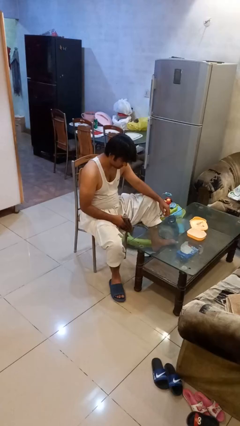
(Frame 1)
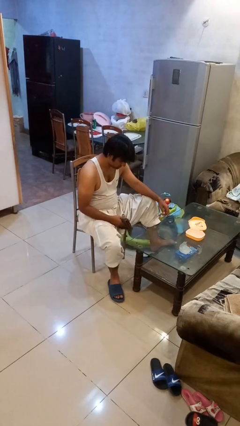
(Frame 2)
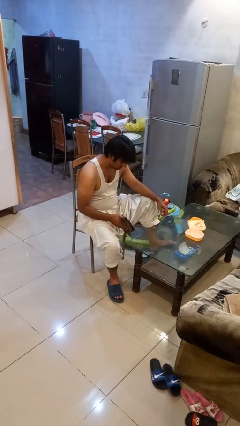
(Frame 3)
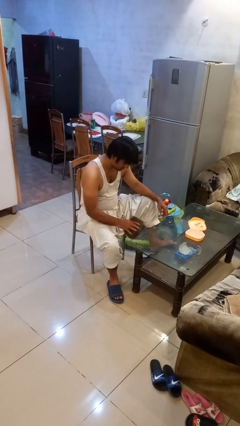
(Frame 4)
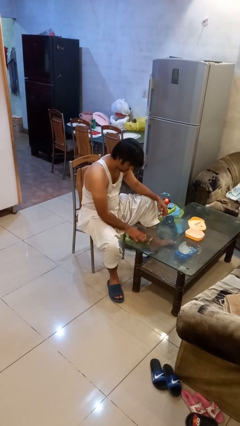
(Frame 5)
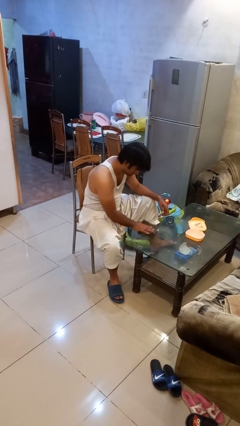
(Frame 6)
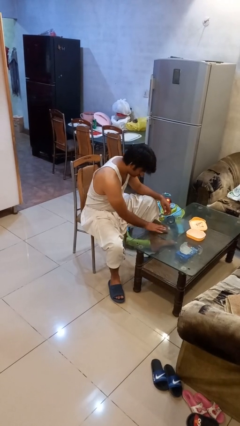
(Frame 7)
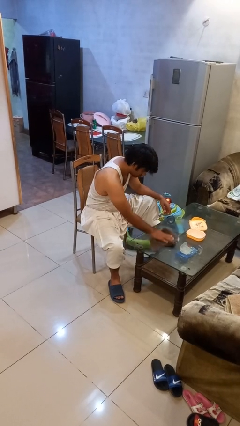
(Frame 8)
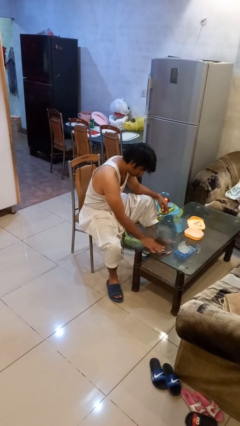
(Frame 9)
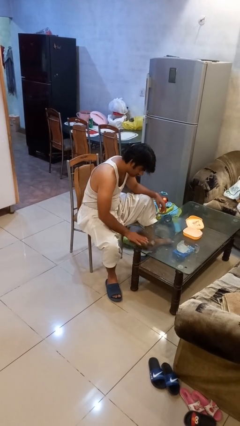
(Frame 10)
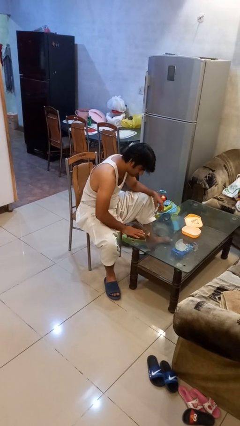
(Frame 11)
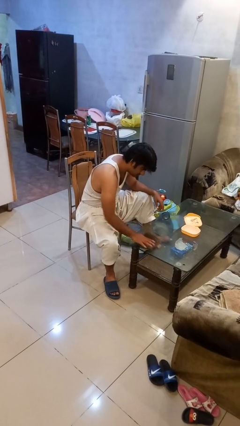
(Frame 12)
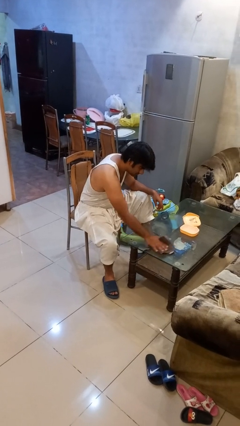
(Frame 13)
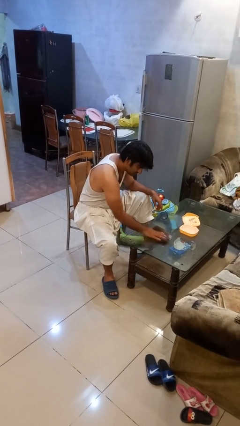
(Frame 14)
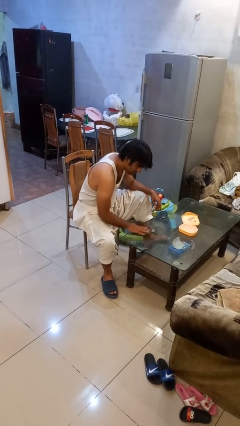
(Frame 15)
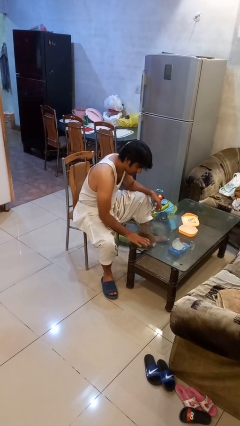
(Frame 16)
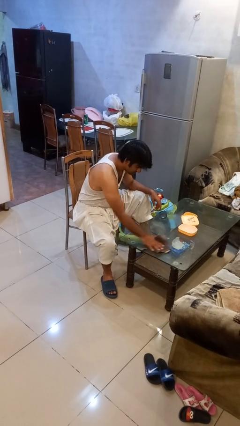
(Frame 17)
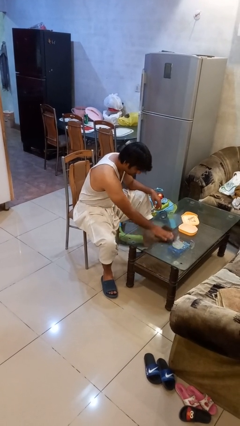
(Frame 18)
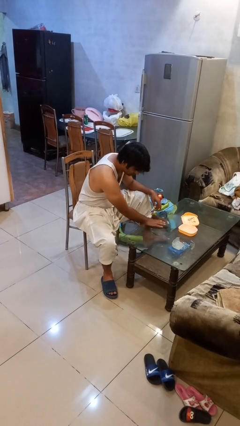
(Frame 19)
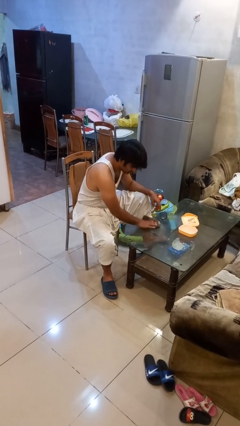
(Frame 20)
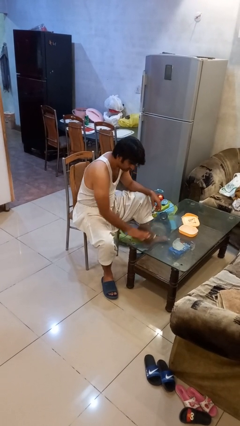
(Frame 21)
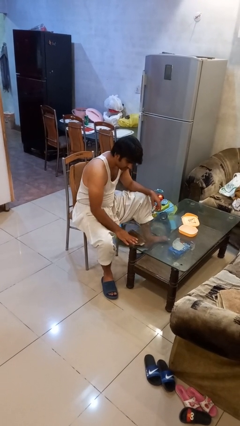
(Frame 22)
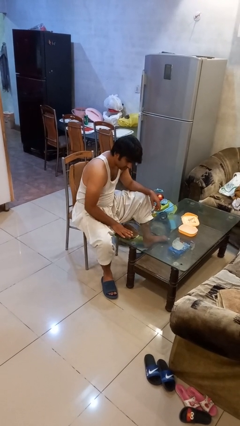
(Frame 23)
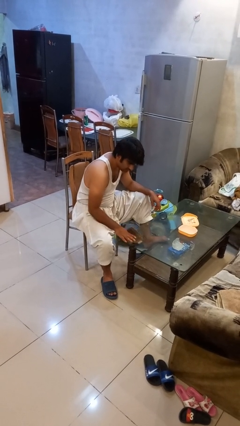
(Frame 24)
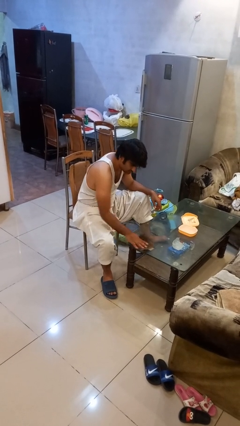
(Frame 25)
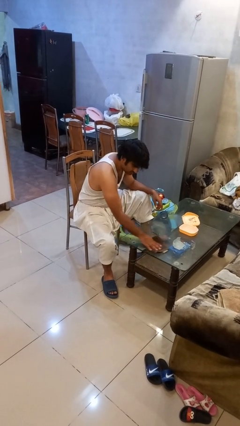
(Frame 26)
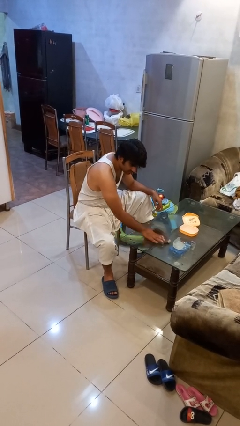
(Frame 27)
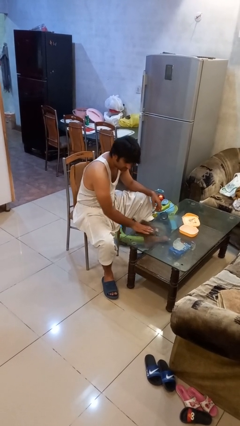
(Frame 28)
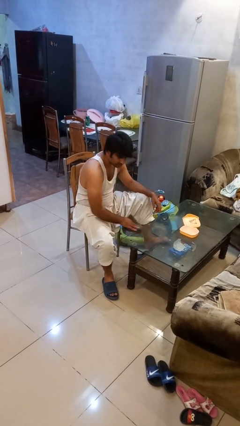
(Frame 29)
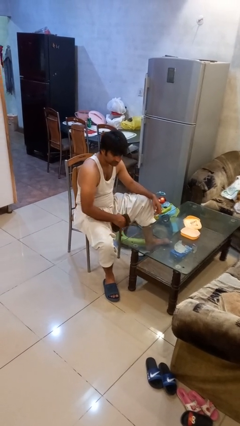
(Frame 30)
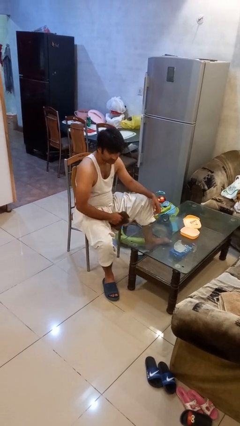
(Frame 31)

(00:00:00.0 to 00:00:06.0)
person cleans table with rag

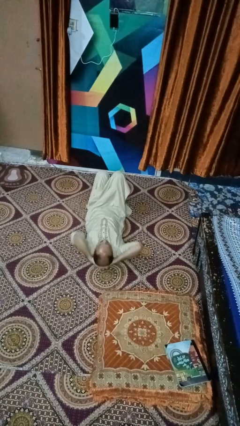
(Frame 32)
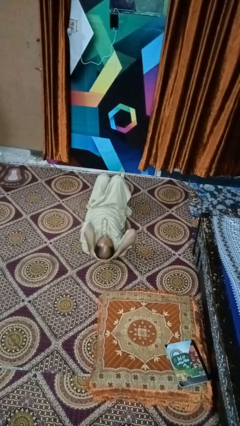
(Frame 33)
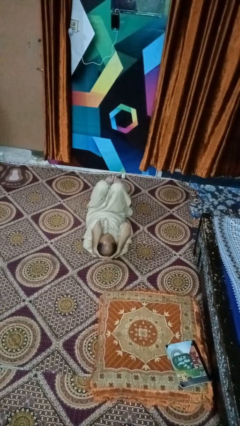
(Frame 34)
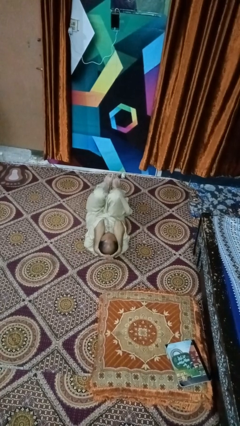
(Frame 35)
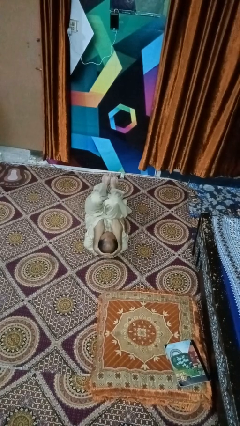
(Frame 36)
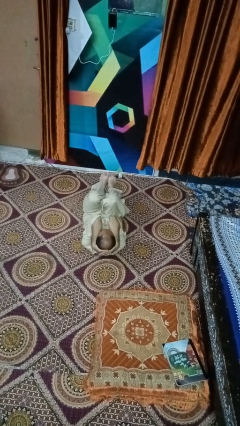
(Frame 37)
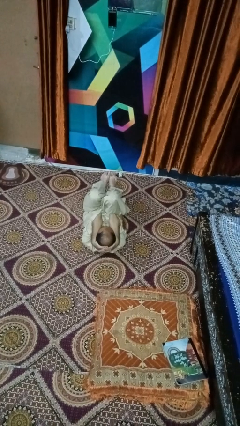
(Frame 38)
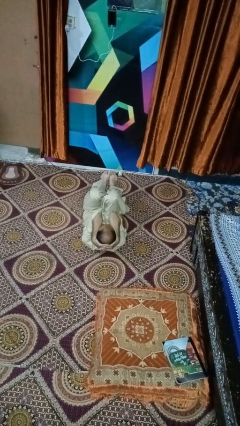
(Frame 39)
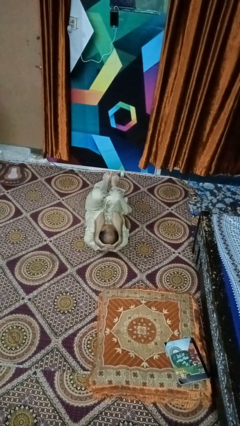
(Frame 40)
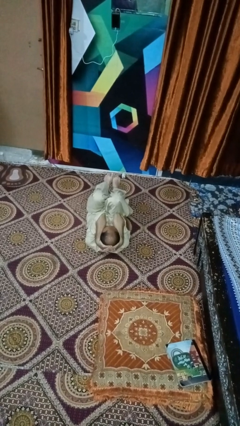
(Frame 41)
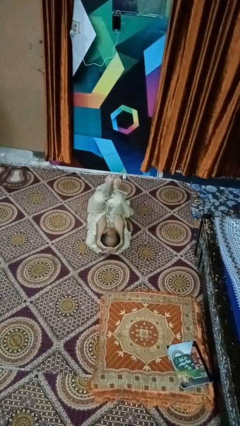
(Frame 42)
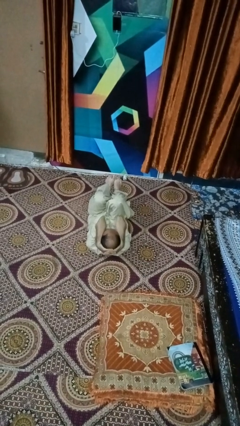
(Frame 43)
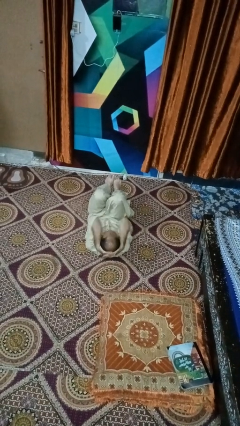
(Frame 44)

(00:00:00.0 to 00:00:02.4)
person exercises with situp

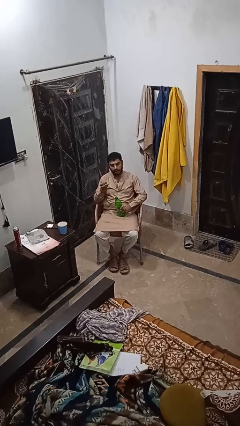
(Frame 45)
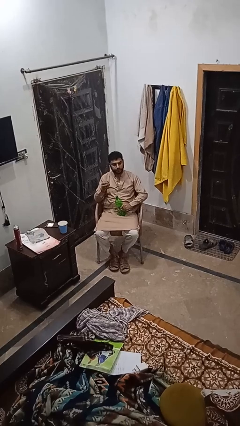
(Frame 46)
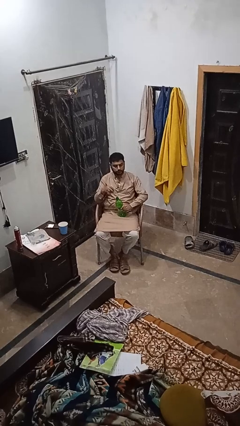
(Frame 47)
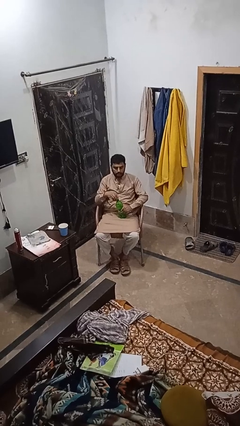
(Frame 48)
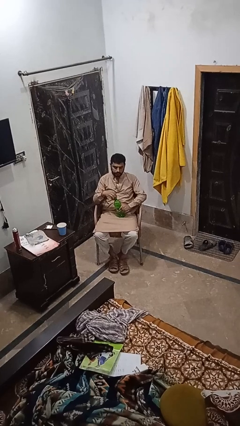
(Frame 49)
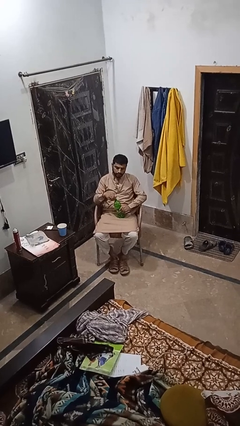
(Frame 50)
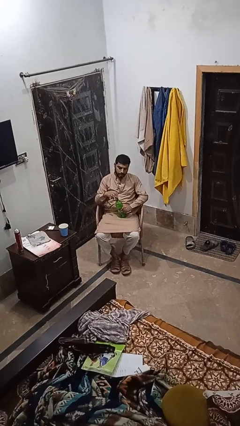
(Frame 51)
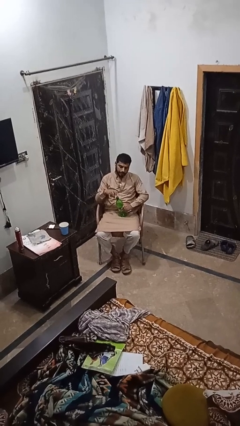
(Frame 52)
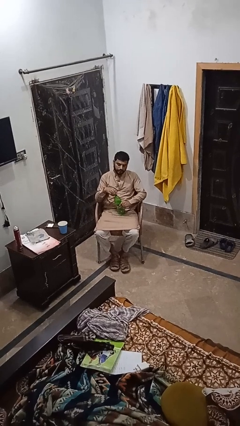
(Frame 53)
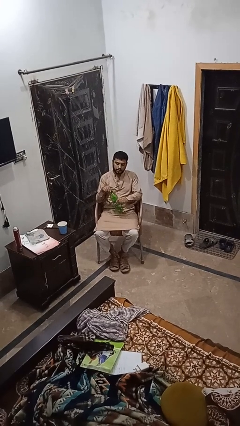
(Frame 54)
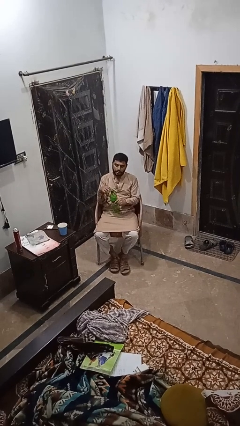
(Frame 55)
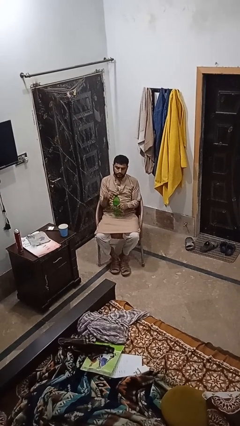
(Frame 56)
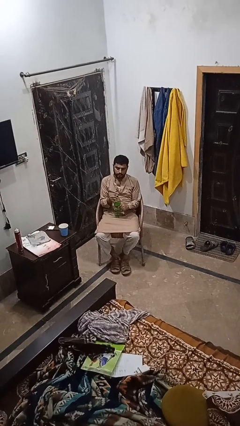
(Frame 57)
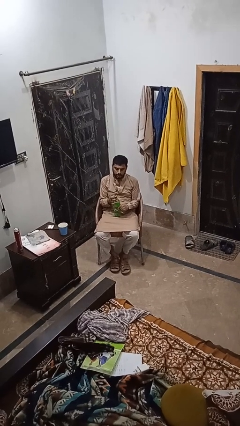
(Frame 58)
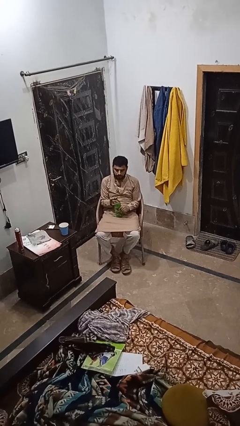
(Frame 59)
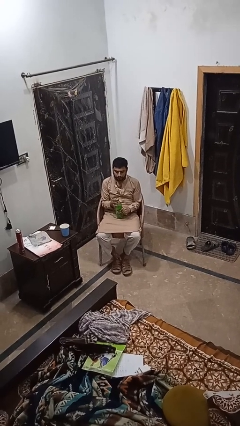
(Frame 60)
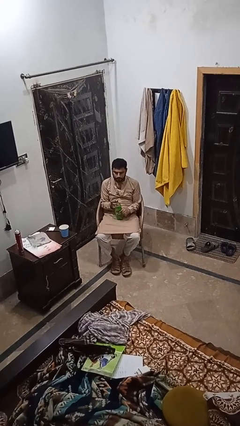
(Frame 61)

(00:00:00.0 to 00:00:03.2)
person screws lid to bottle

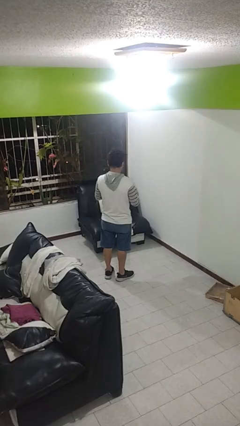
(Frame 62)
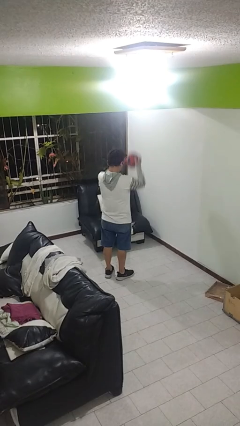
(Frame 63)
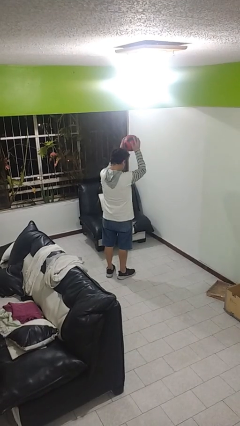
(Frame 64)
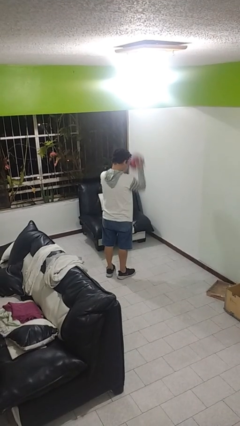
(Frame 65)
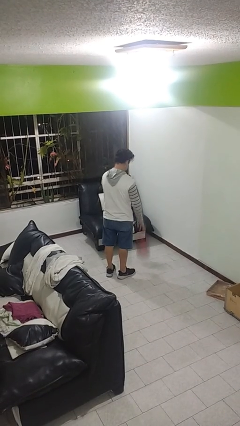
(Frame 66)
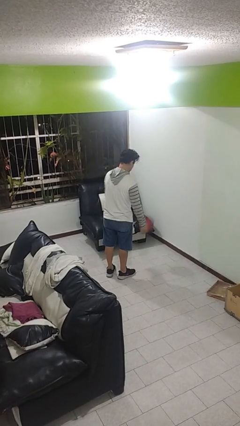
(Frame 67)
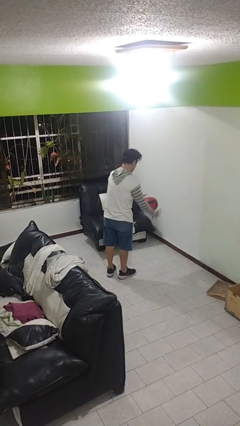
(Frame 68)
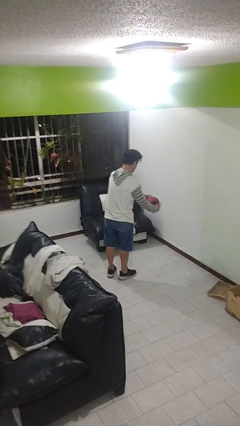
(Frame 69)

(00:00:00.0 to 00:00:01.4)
person bounces ball on floor

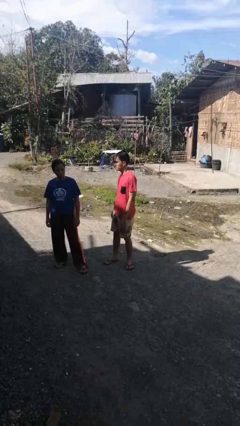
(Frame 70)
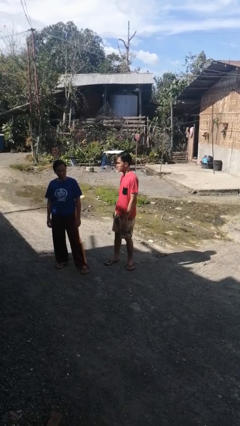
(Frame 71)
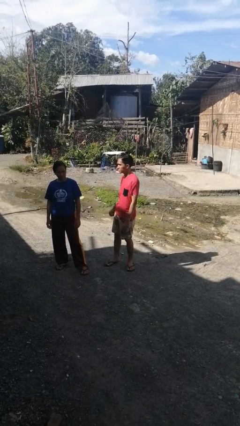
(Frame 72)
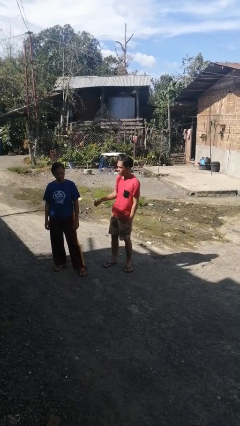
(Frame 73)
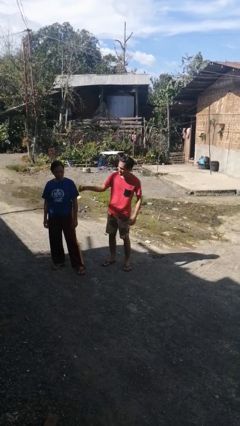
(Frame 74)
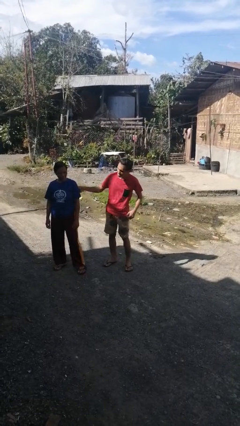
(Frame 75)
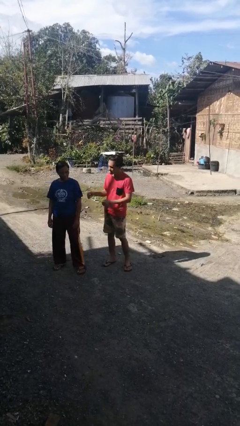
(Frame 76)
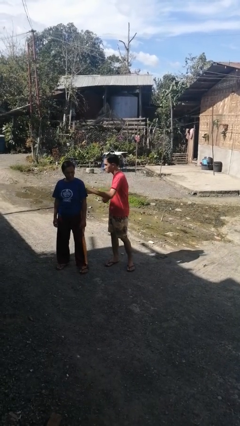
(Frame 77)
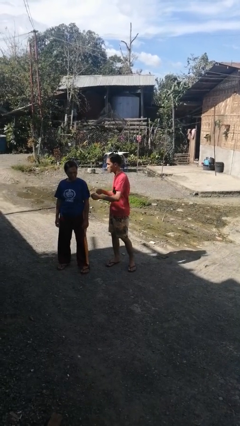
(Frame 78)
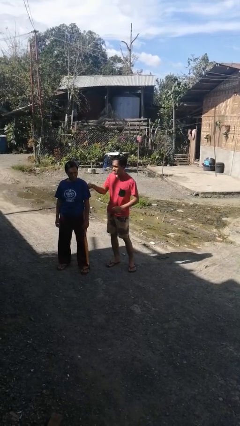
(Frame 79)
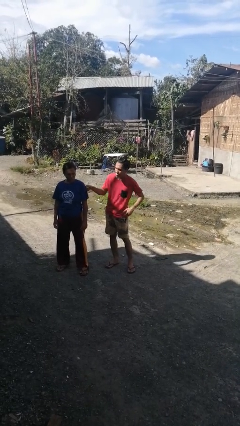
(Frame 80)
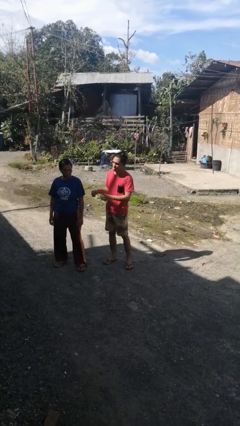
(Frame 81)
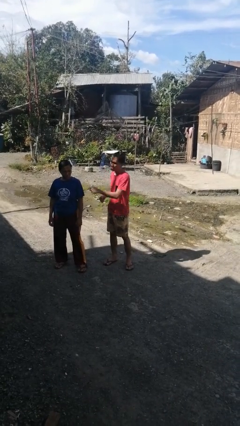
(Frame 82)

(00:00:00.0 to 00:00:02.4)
person pounds shoulders of person

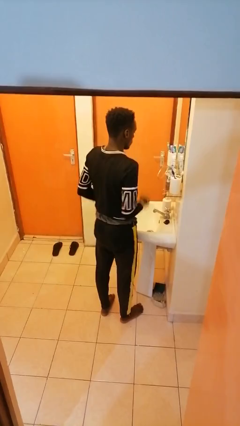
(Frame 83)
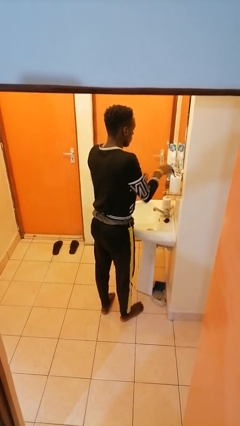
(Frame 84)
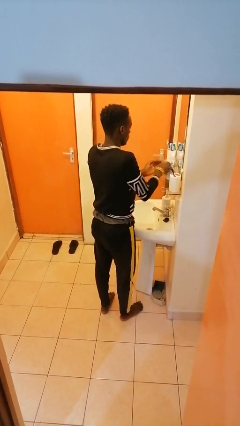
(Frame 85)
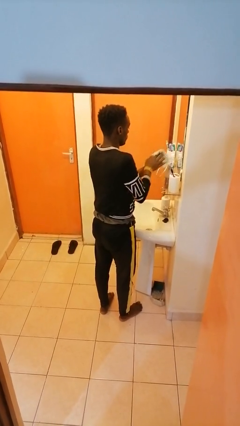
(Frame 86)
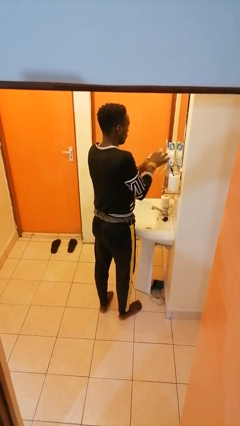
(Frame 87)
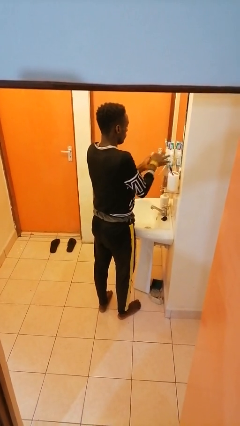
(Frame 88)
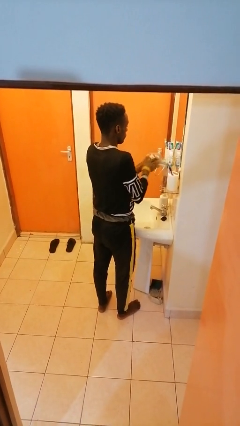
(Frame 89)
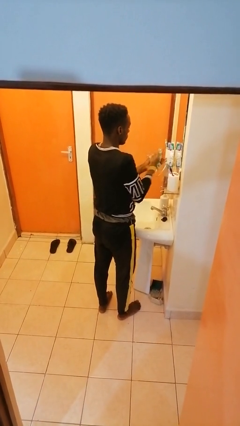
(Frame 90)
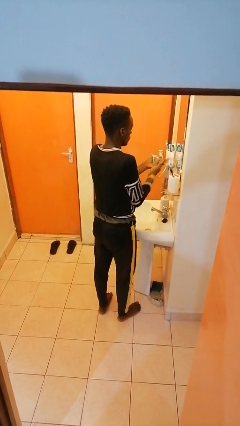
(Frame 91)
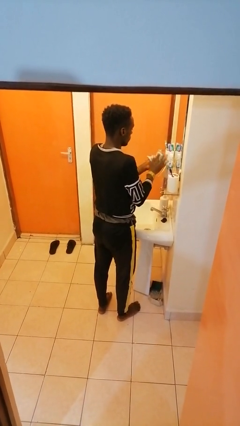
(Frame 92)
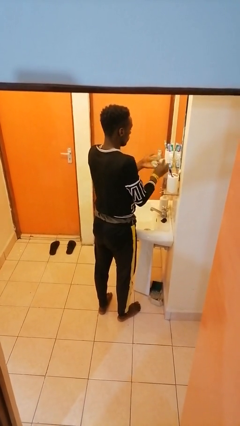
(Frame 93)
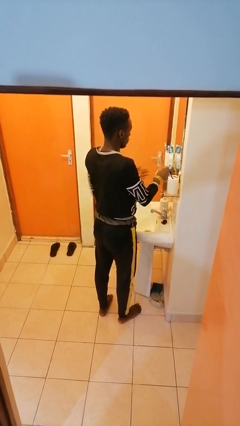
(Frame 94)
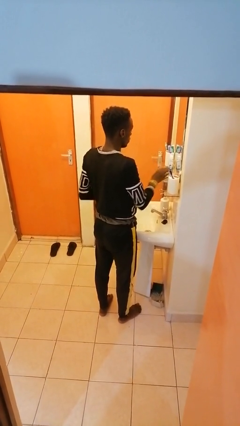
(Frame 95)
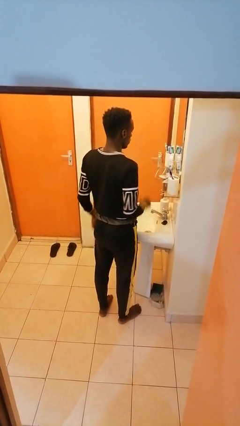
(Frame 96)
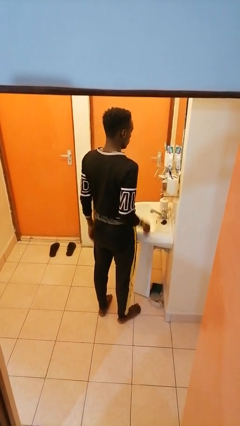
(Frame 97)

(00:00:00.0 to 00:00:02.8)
person dries hands with towel
